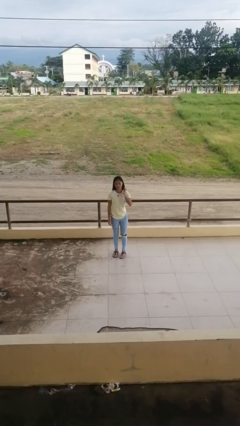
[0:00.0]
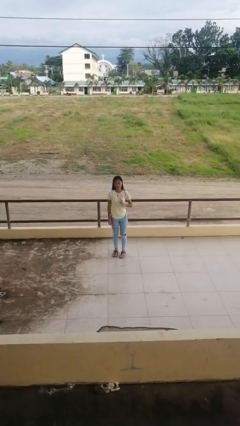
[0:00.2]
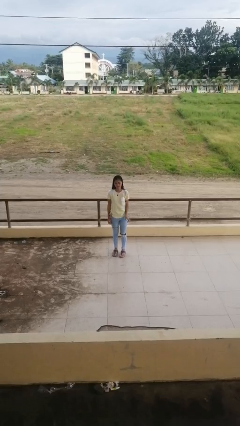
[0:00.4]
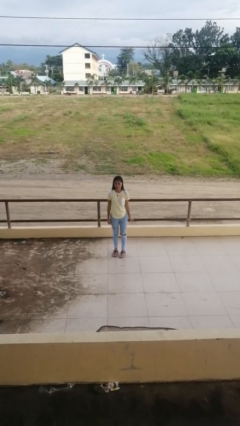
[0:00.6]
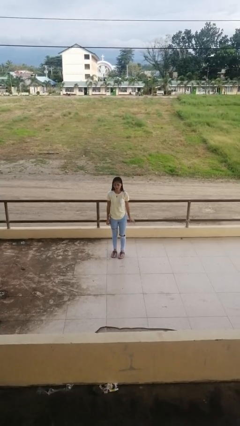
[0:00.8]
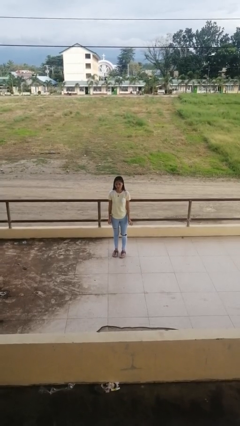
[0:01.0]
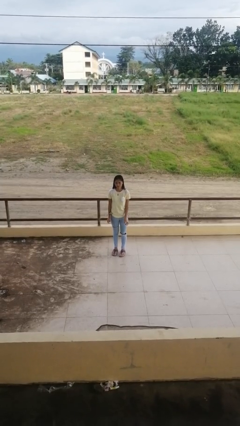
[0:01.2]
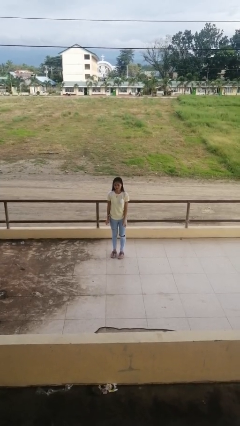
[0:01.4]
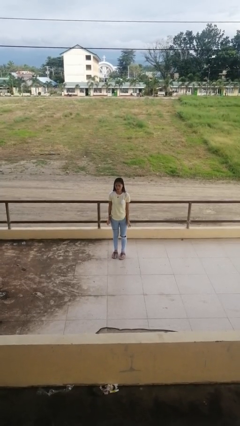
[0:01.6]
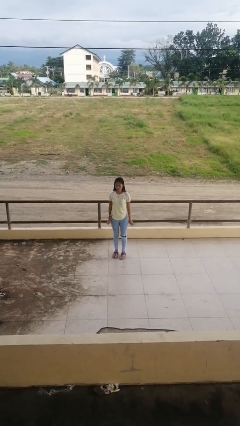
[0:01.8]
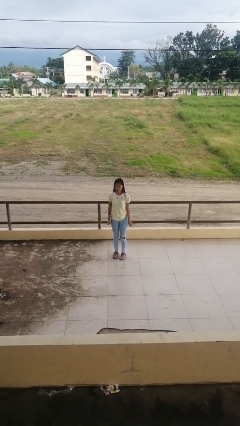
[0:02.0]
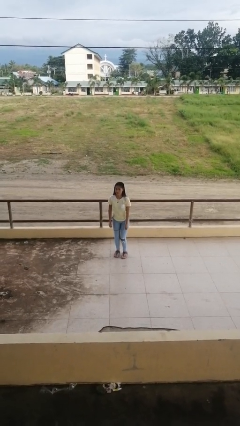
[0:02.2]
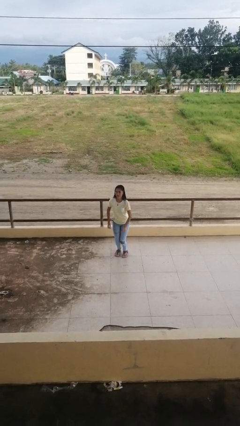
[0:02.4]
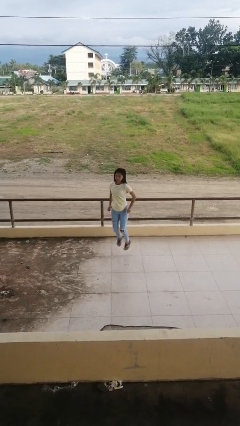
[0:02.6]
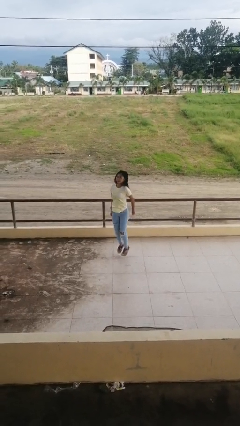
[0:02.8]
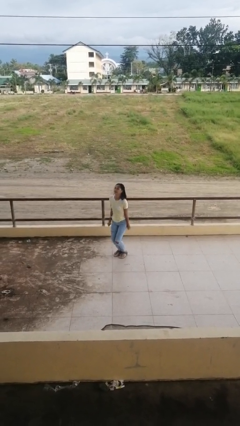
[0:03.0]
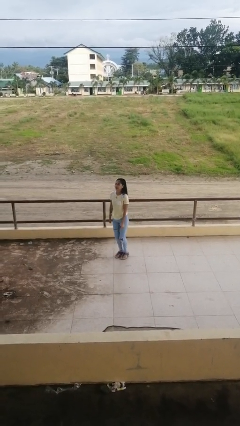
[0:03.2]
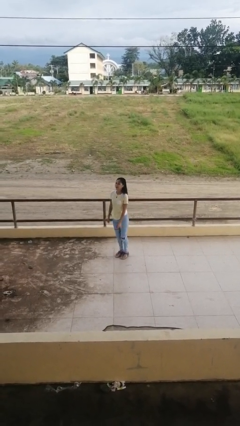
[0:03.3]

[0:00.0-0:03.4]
person jumps

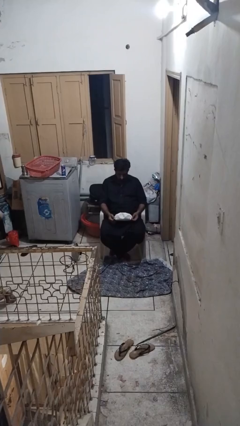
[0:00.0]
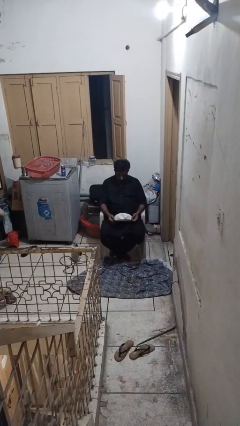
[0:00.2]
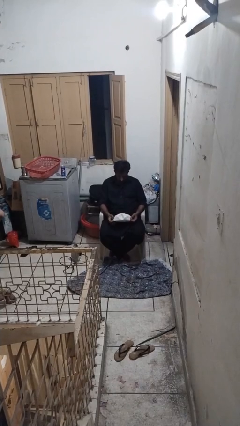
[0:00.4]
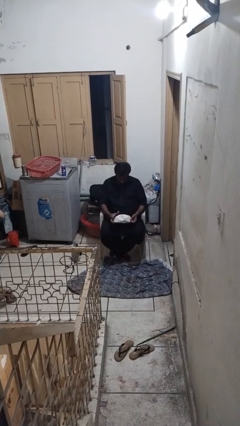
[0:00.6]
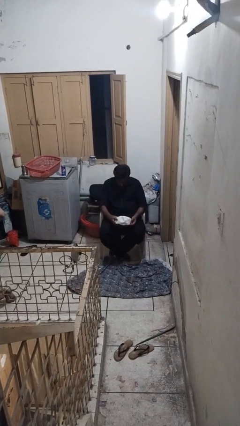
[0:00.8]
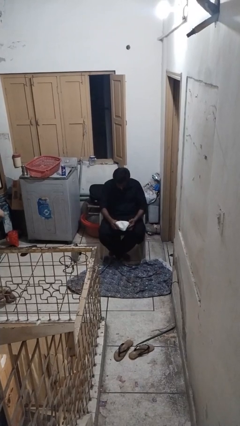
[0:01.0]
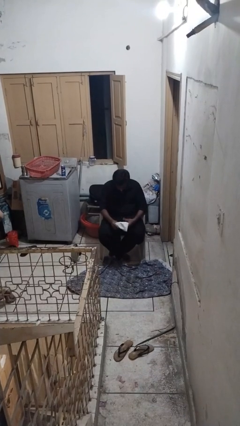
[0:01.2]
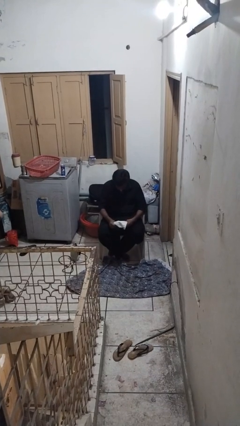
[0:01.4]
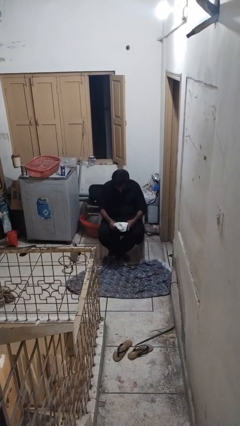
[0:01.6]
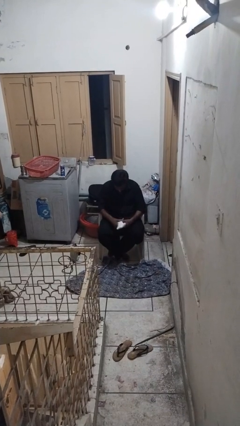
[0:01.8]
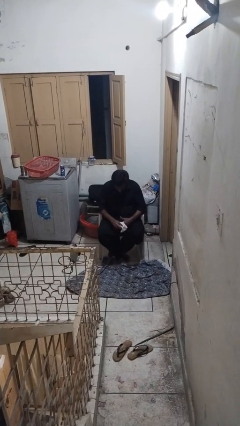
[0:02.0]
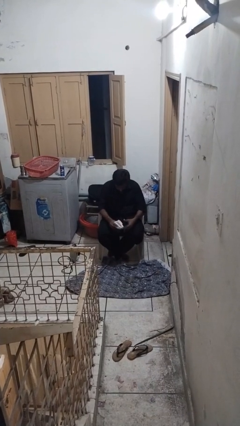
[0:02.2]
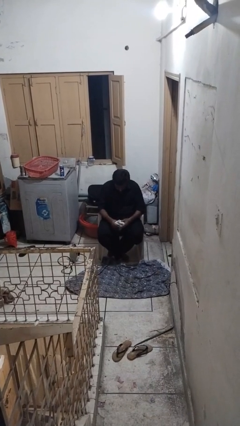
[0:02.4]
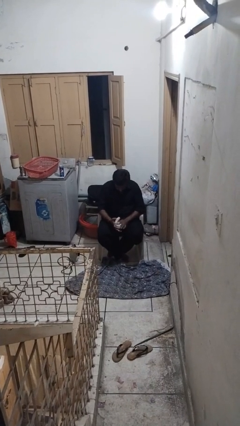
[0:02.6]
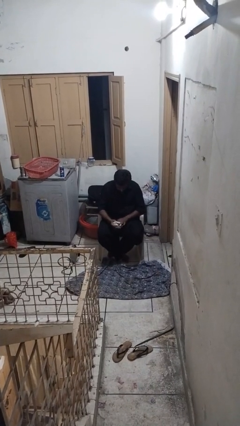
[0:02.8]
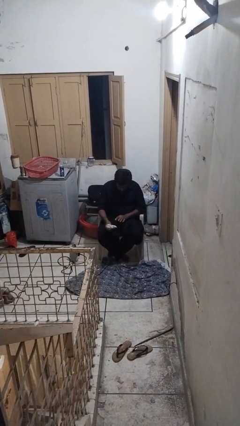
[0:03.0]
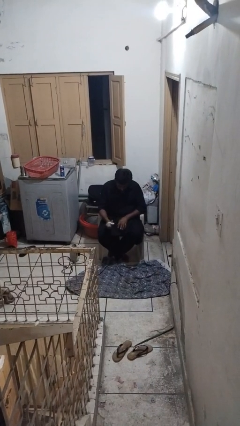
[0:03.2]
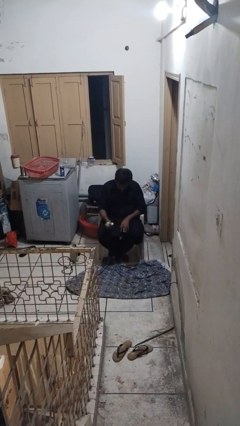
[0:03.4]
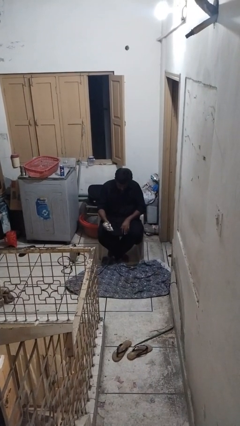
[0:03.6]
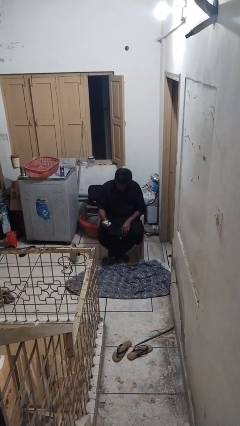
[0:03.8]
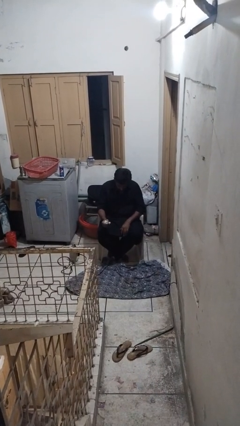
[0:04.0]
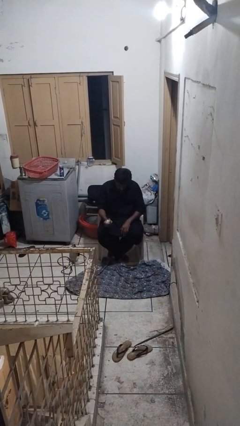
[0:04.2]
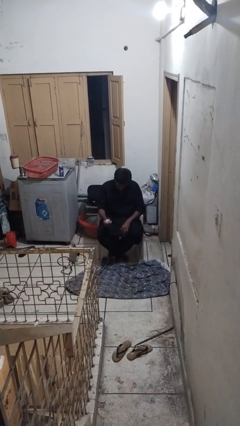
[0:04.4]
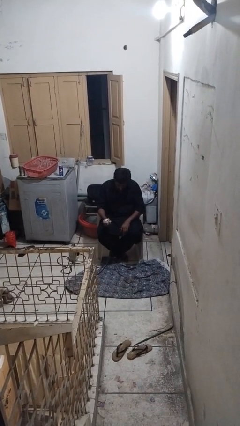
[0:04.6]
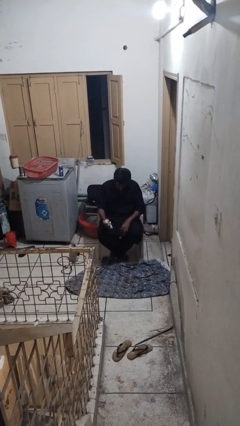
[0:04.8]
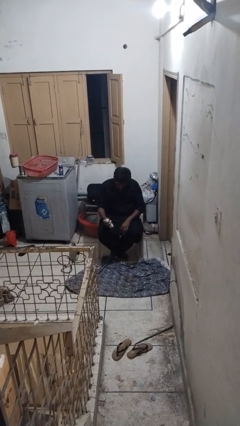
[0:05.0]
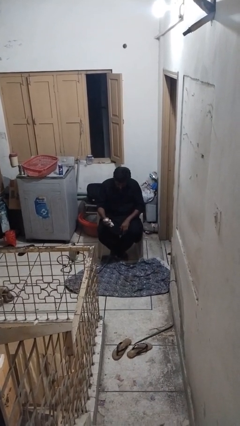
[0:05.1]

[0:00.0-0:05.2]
person squeezes object

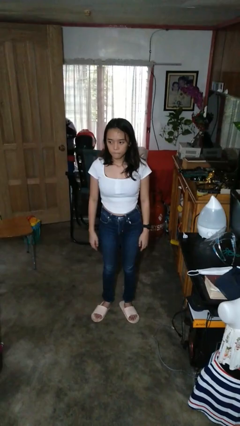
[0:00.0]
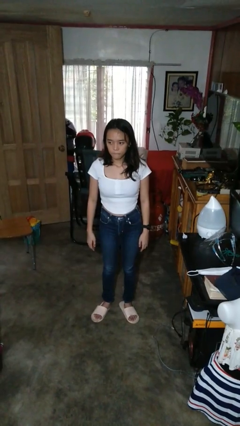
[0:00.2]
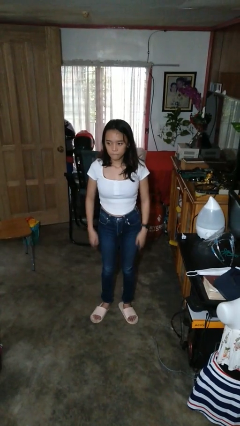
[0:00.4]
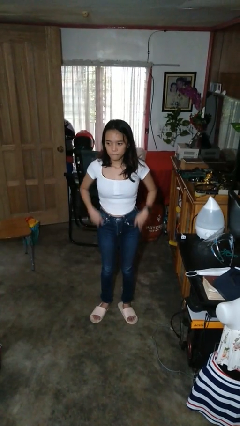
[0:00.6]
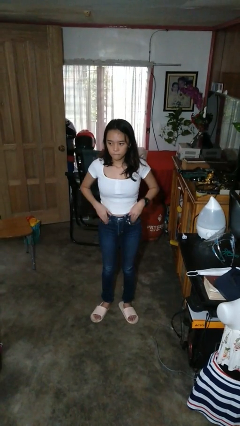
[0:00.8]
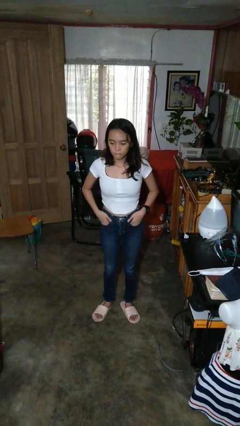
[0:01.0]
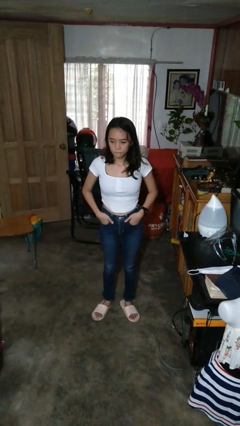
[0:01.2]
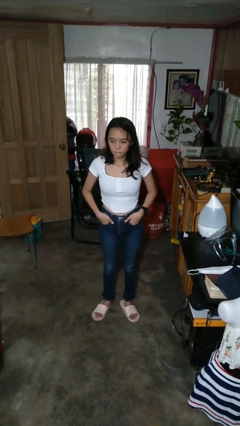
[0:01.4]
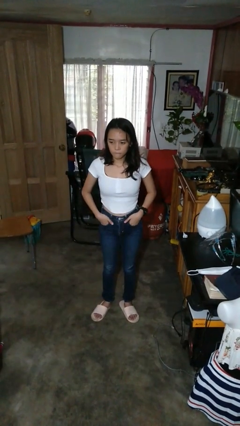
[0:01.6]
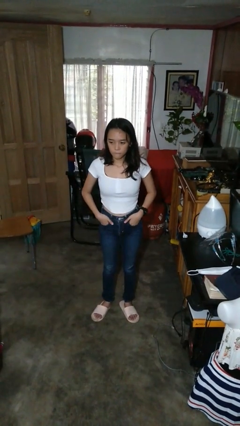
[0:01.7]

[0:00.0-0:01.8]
person puts hands in back pockets

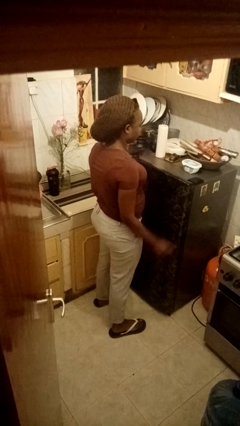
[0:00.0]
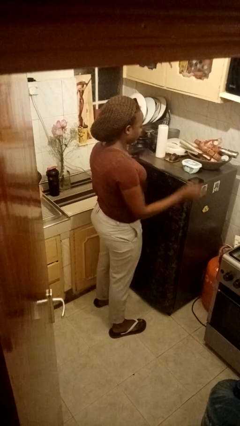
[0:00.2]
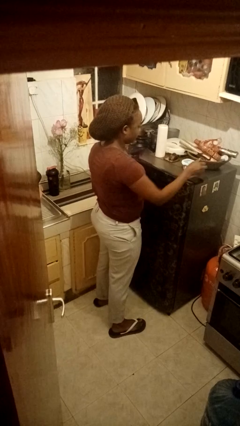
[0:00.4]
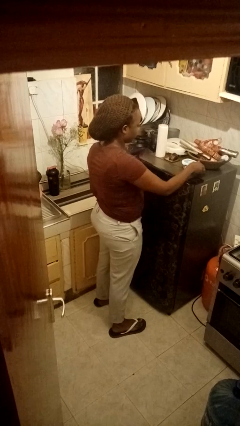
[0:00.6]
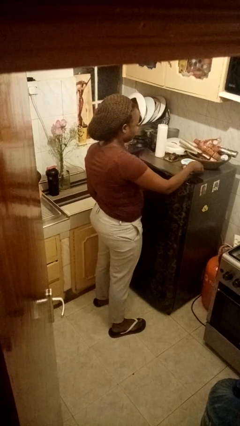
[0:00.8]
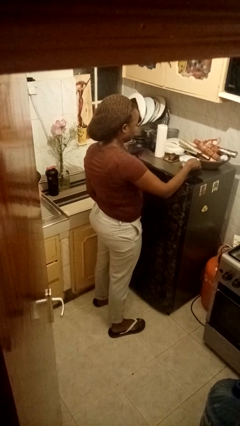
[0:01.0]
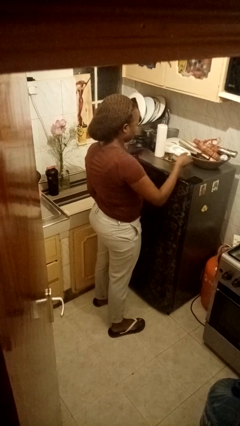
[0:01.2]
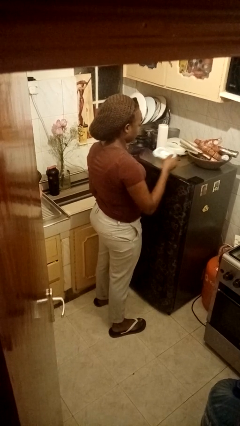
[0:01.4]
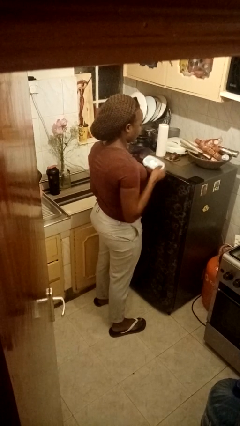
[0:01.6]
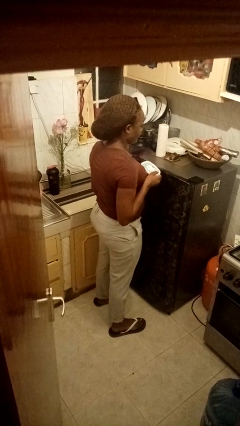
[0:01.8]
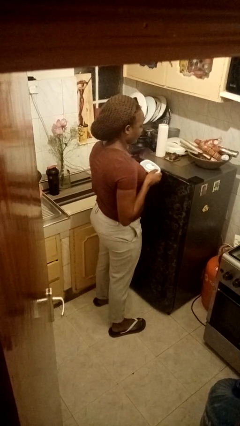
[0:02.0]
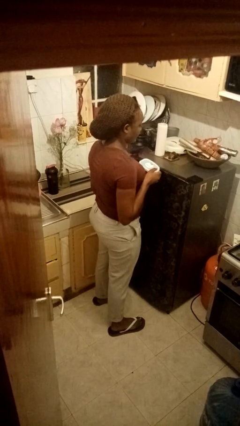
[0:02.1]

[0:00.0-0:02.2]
person picks up object from countertop

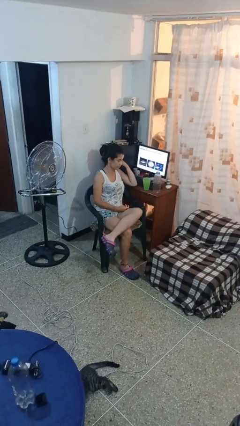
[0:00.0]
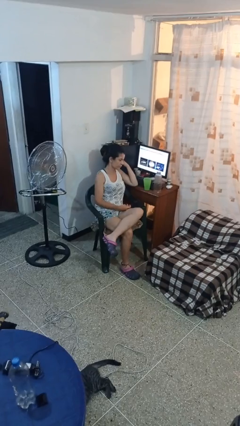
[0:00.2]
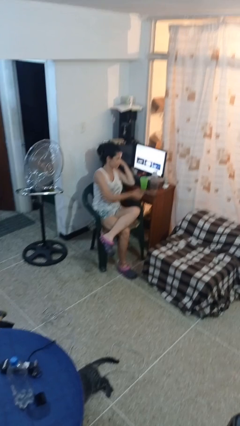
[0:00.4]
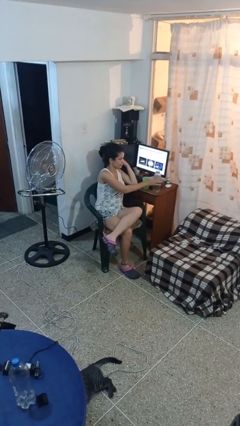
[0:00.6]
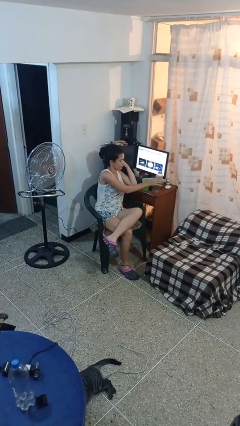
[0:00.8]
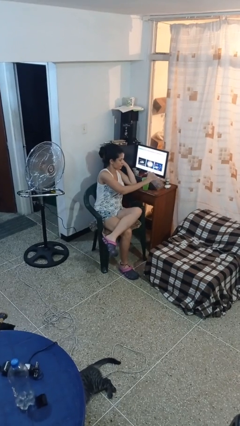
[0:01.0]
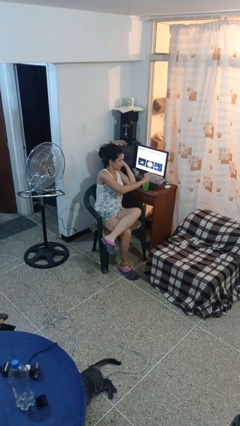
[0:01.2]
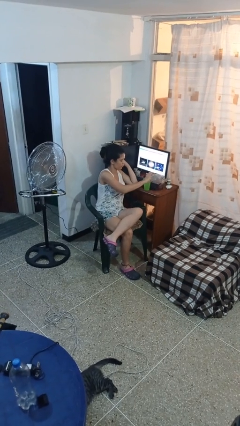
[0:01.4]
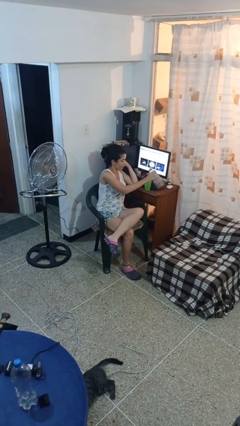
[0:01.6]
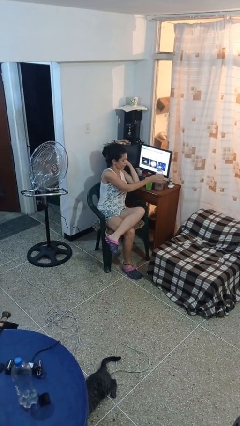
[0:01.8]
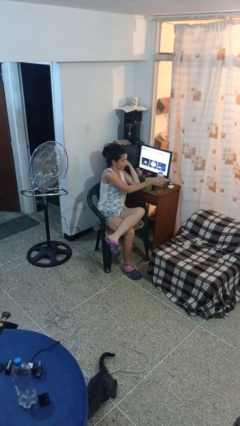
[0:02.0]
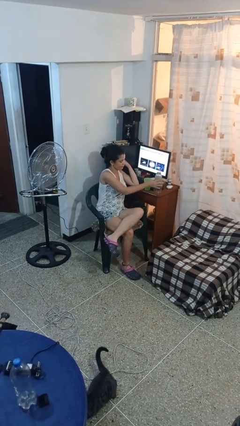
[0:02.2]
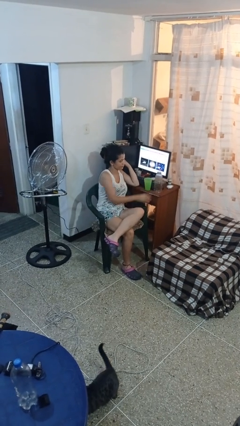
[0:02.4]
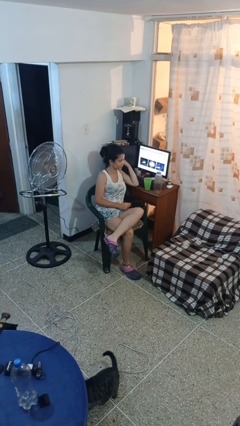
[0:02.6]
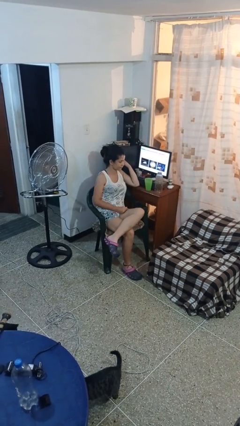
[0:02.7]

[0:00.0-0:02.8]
person pours liquid into cup

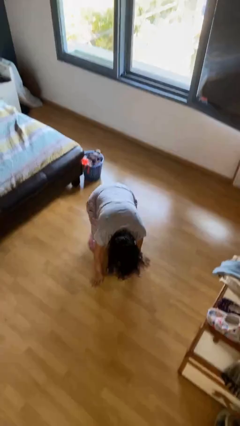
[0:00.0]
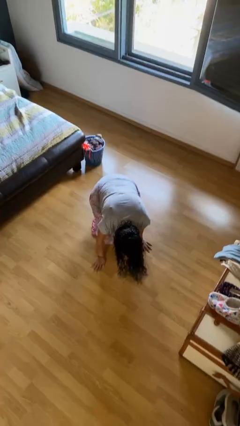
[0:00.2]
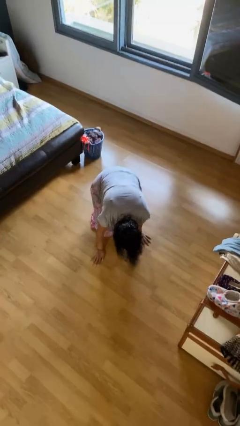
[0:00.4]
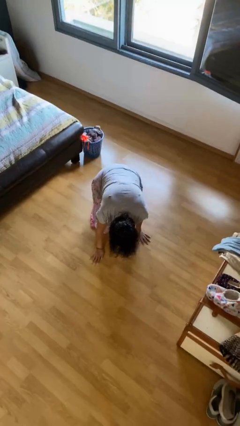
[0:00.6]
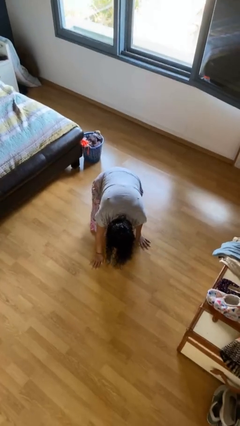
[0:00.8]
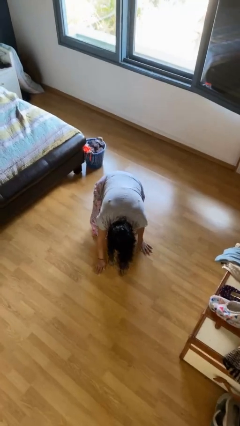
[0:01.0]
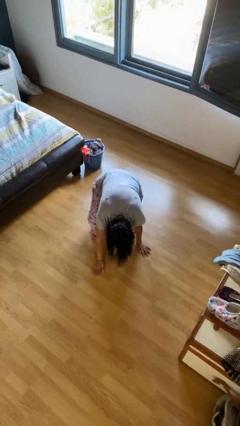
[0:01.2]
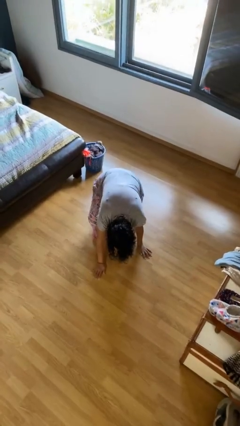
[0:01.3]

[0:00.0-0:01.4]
person lies down on floor

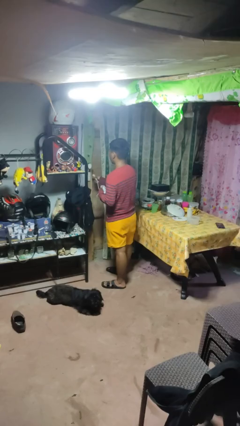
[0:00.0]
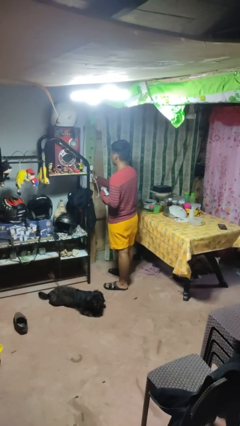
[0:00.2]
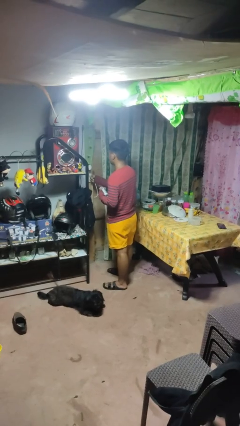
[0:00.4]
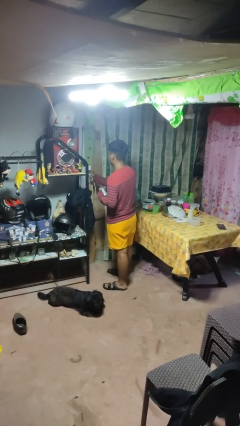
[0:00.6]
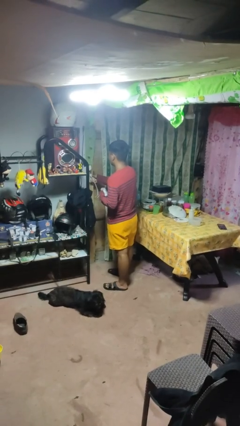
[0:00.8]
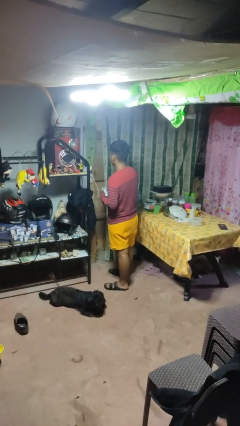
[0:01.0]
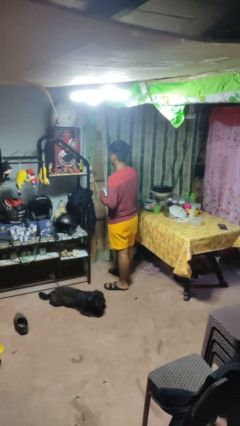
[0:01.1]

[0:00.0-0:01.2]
person plugs into electrical socket
